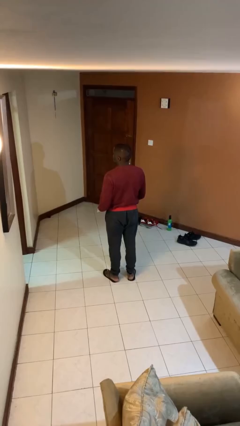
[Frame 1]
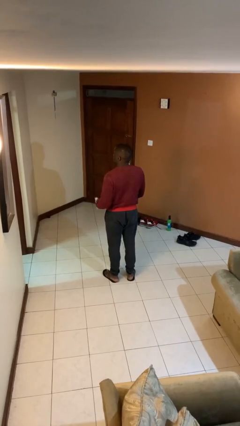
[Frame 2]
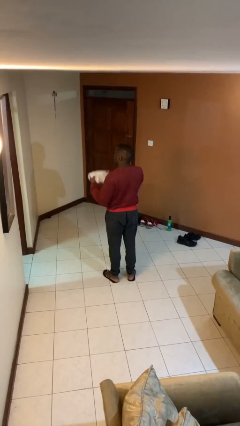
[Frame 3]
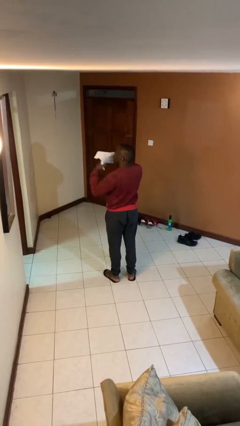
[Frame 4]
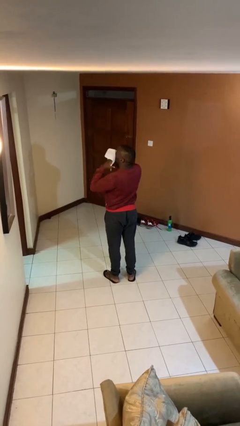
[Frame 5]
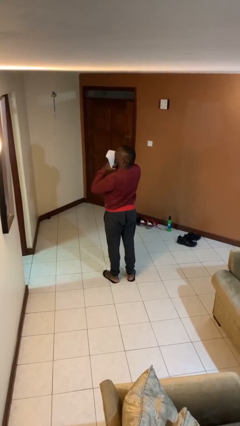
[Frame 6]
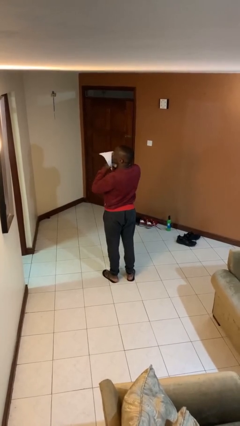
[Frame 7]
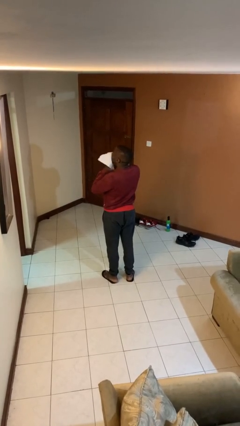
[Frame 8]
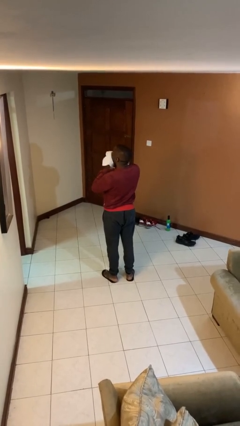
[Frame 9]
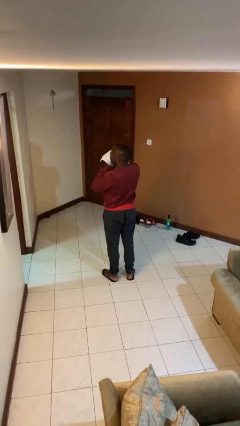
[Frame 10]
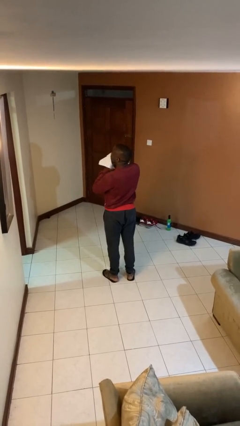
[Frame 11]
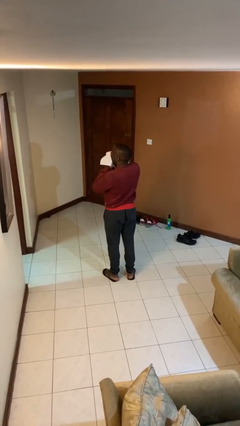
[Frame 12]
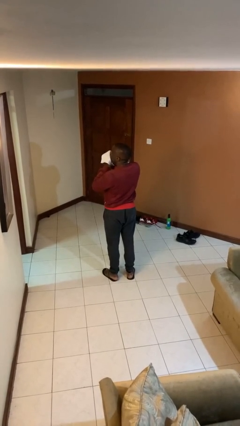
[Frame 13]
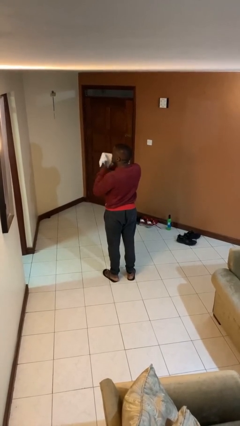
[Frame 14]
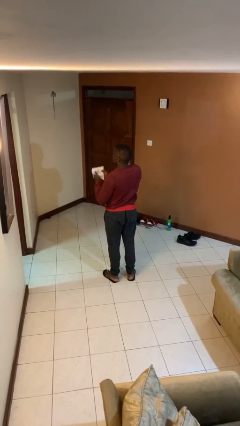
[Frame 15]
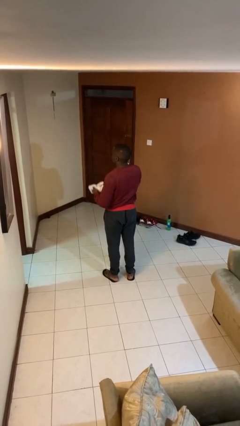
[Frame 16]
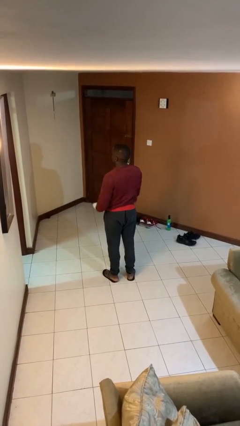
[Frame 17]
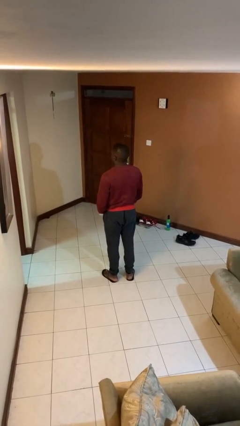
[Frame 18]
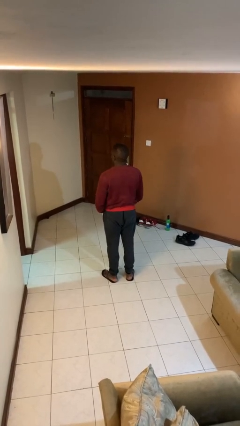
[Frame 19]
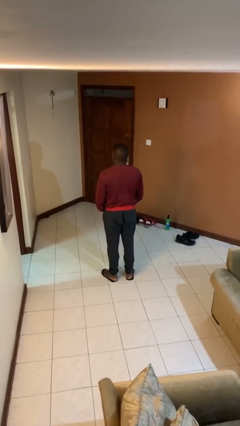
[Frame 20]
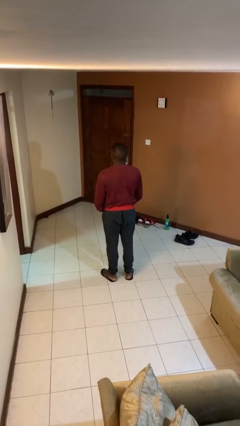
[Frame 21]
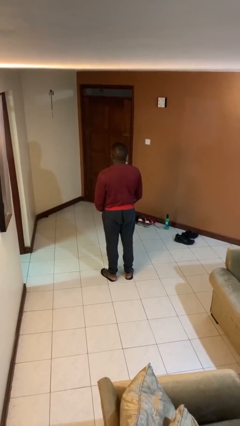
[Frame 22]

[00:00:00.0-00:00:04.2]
person wipes mouth with napkin

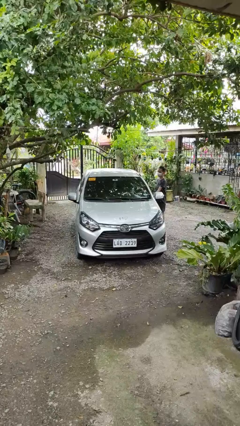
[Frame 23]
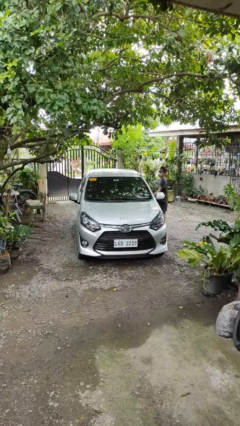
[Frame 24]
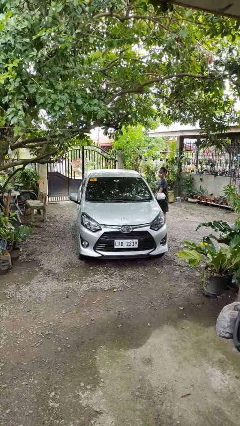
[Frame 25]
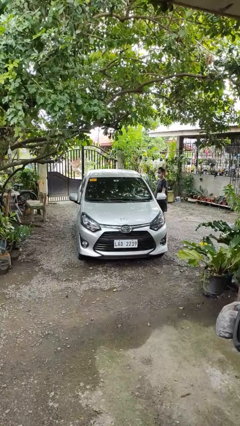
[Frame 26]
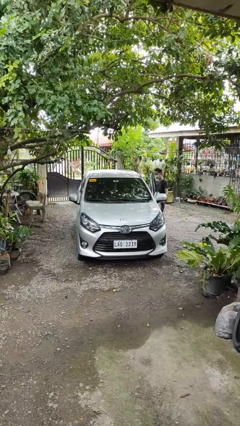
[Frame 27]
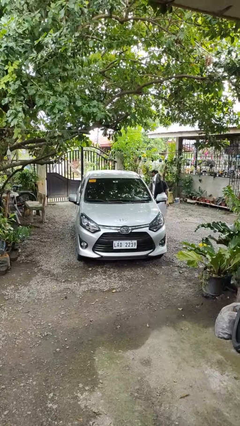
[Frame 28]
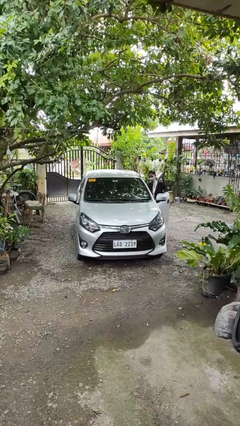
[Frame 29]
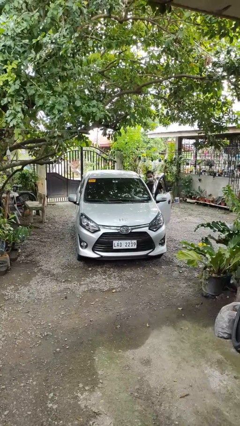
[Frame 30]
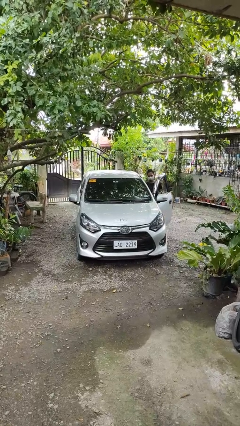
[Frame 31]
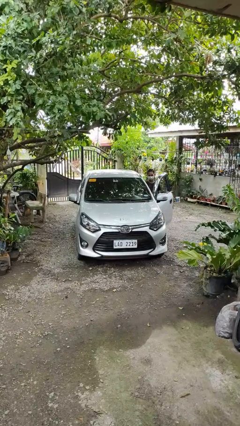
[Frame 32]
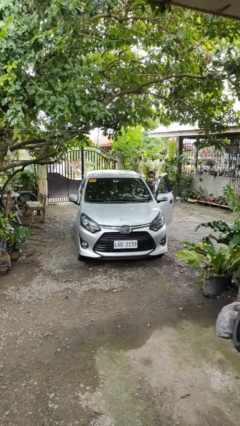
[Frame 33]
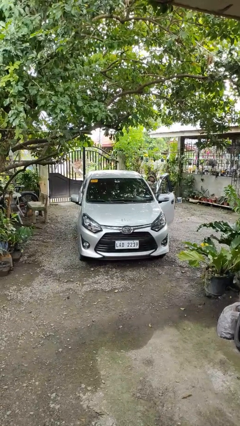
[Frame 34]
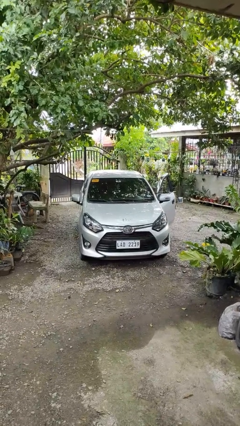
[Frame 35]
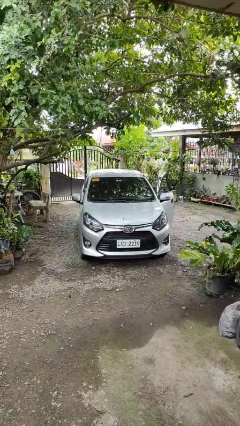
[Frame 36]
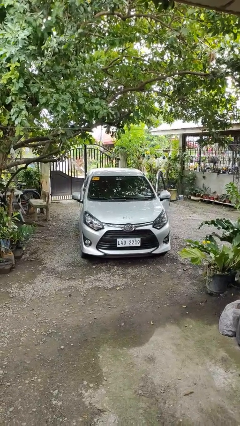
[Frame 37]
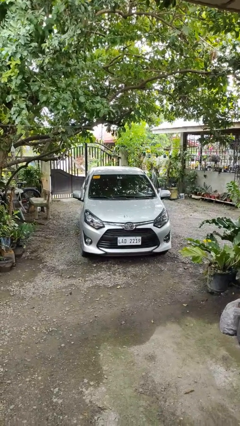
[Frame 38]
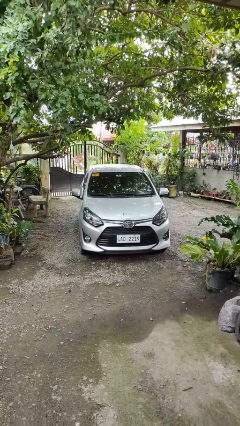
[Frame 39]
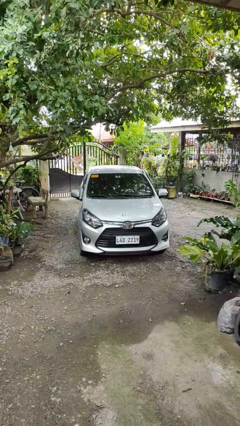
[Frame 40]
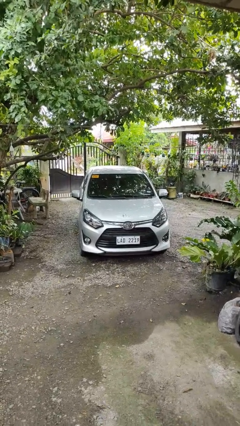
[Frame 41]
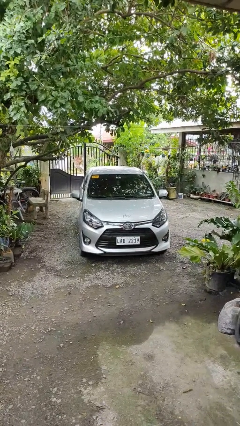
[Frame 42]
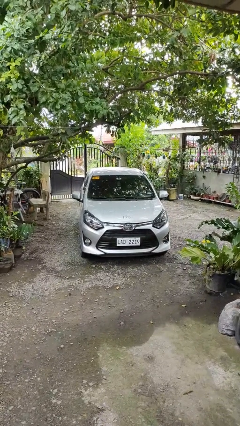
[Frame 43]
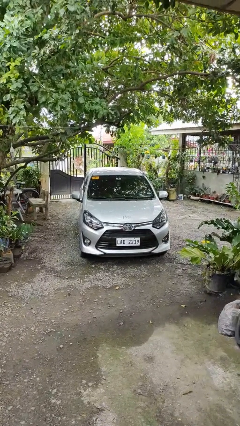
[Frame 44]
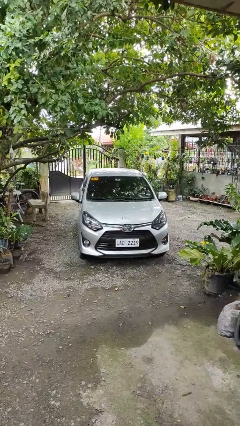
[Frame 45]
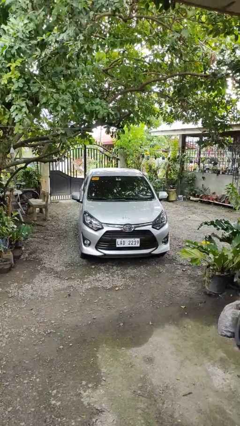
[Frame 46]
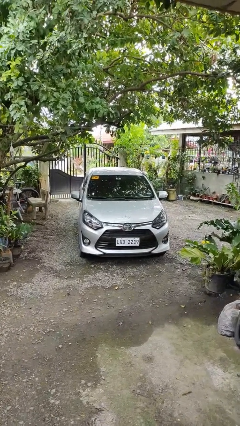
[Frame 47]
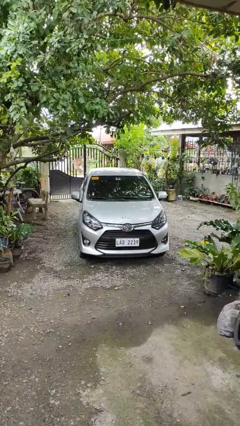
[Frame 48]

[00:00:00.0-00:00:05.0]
car picks up person

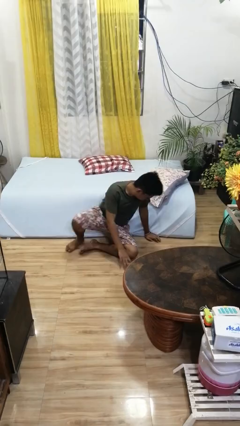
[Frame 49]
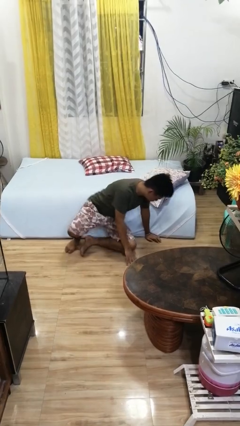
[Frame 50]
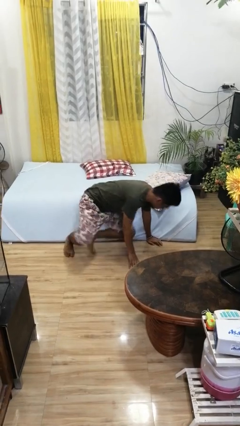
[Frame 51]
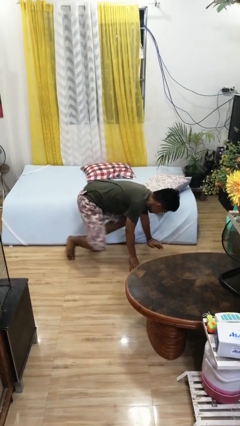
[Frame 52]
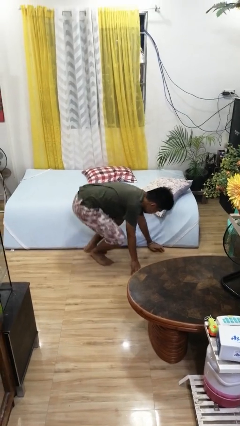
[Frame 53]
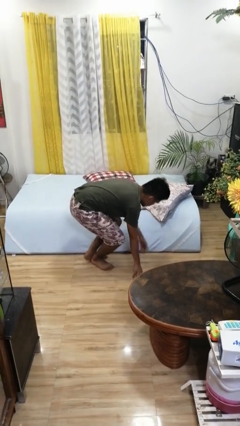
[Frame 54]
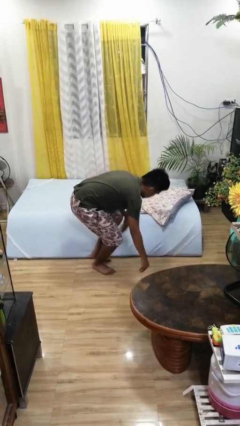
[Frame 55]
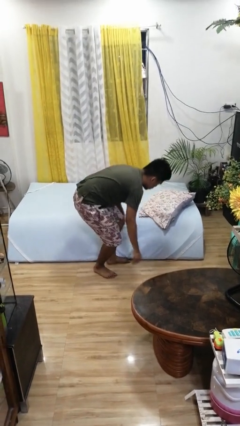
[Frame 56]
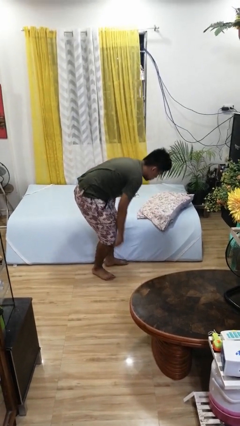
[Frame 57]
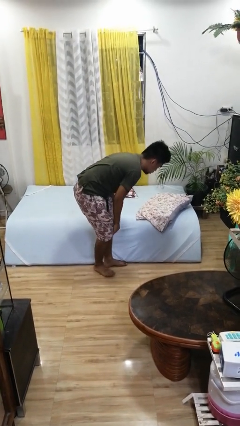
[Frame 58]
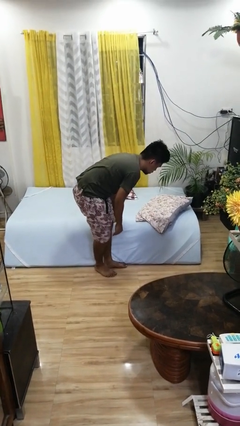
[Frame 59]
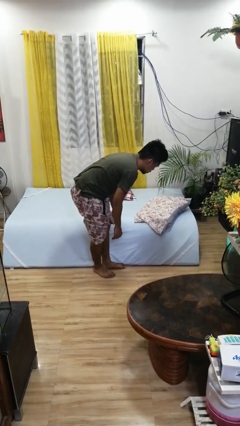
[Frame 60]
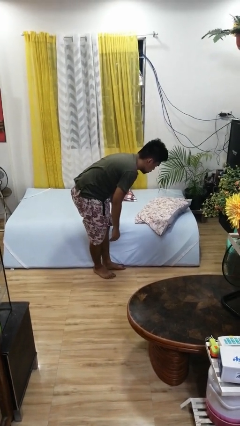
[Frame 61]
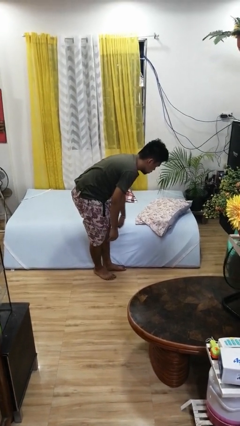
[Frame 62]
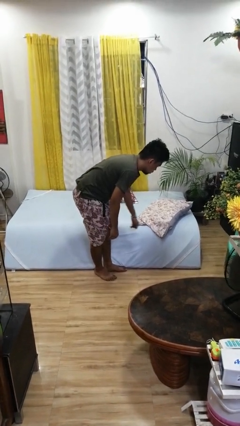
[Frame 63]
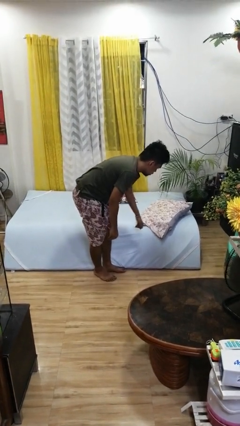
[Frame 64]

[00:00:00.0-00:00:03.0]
person stands up from floor

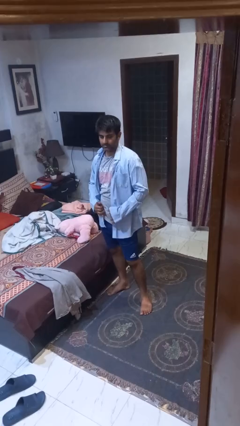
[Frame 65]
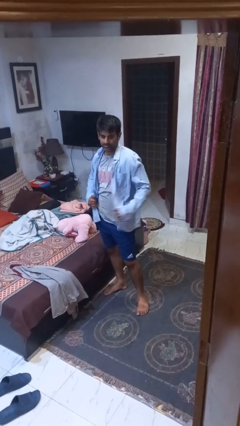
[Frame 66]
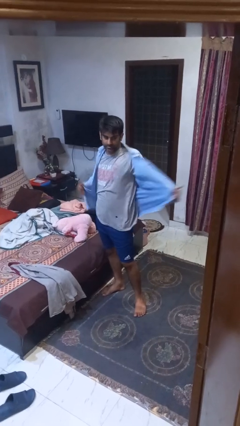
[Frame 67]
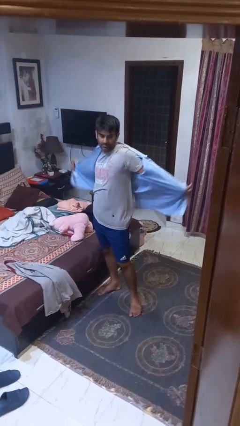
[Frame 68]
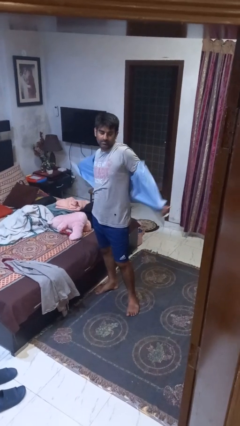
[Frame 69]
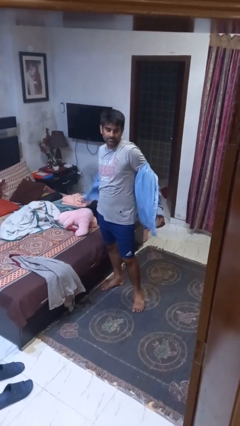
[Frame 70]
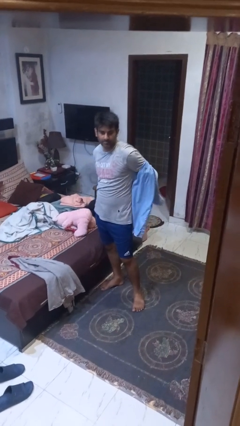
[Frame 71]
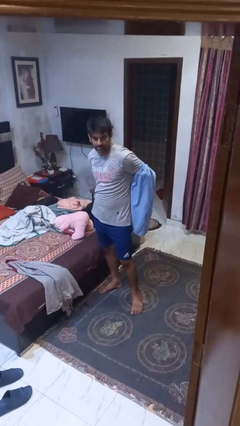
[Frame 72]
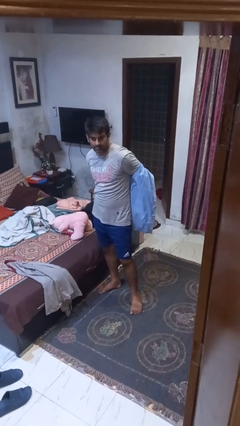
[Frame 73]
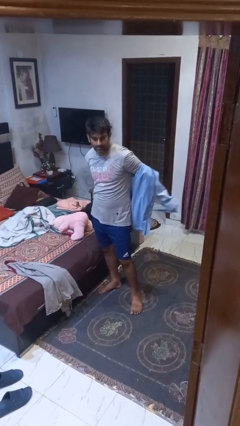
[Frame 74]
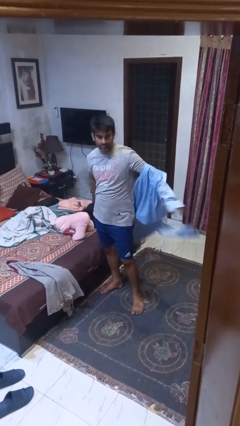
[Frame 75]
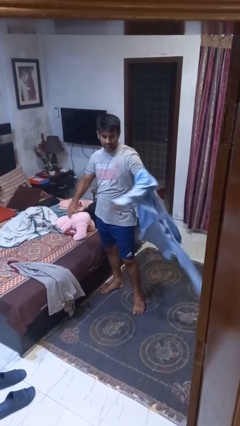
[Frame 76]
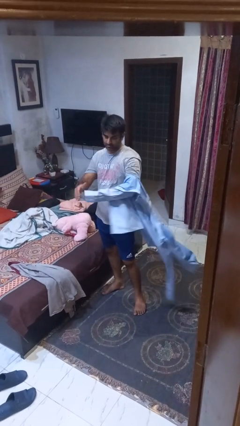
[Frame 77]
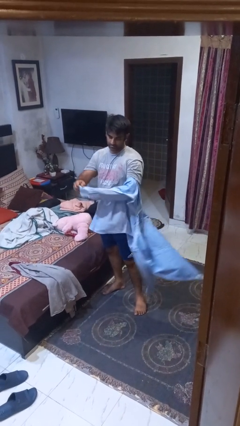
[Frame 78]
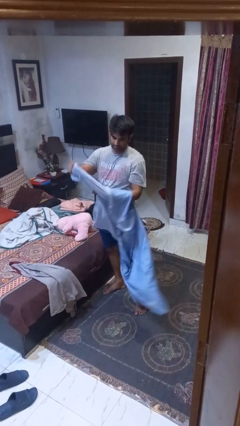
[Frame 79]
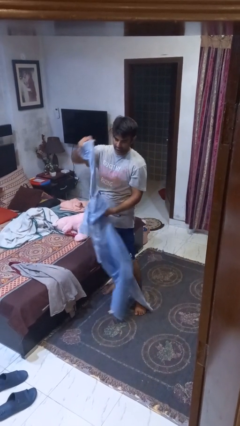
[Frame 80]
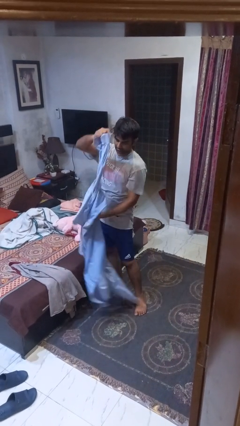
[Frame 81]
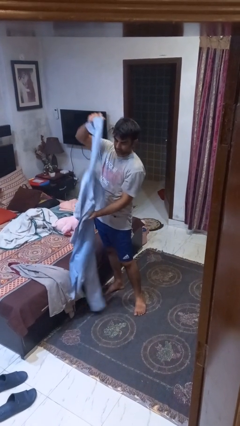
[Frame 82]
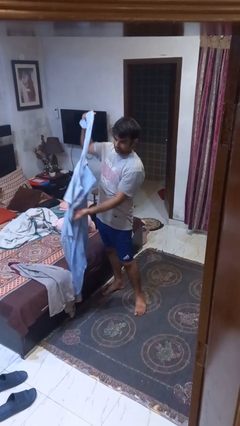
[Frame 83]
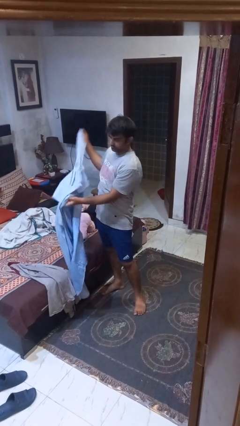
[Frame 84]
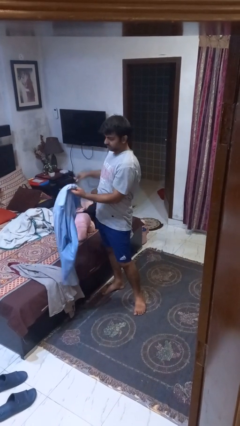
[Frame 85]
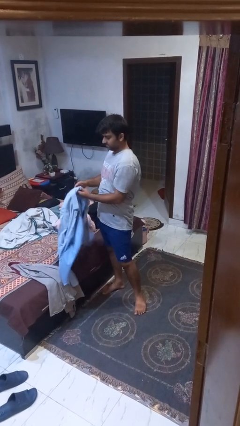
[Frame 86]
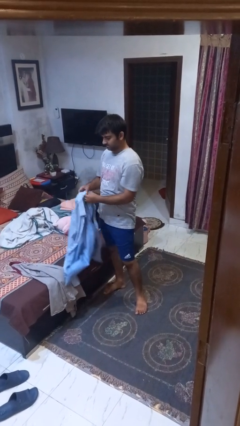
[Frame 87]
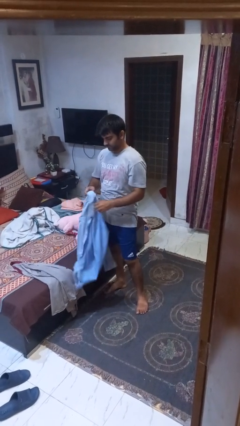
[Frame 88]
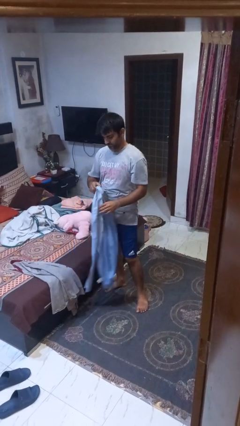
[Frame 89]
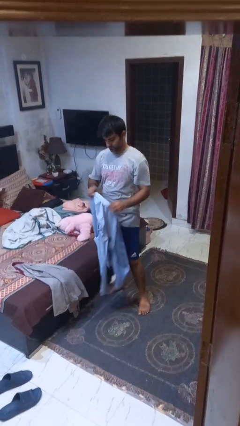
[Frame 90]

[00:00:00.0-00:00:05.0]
person takes off shirt

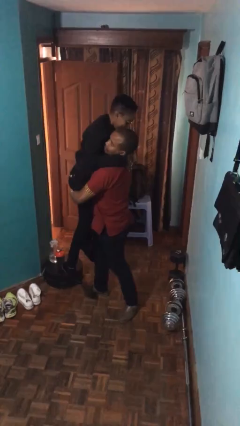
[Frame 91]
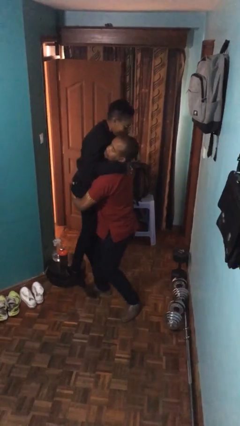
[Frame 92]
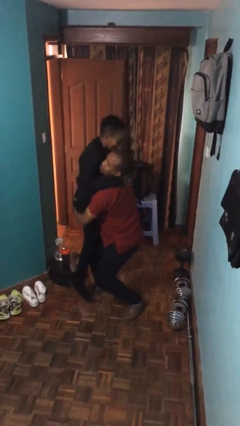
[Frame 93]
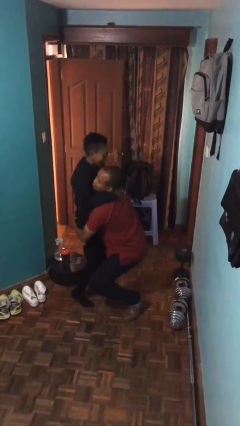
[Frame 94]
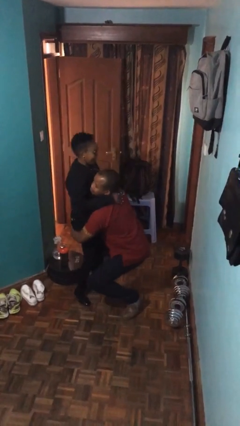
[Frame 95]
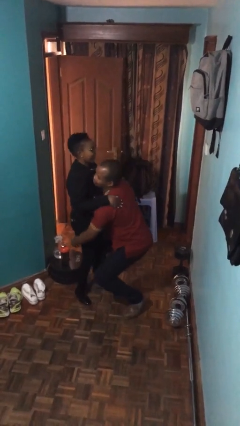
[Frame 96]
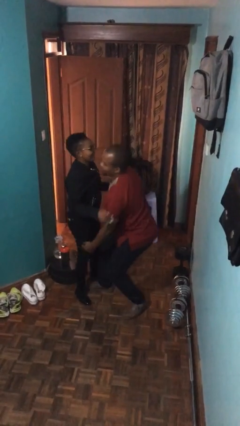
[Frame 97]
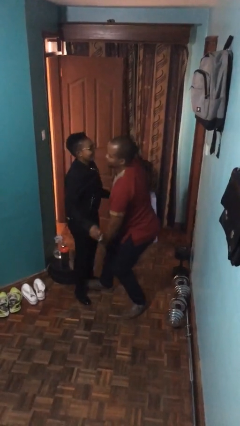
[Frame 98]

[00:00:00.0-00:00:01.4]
person puts down person
